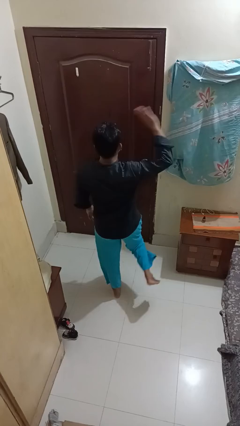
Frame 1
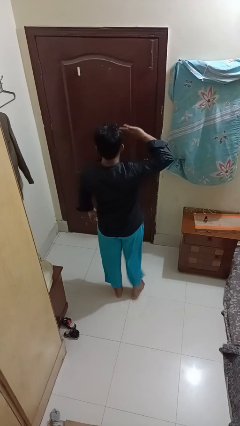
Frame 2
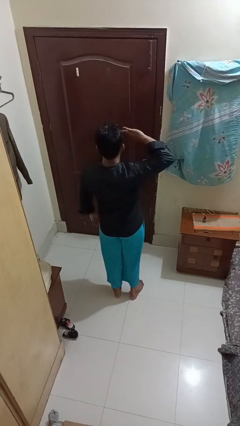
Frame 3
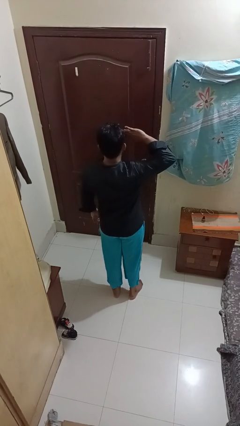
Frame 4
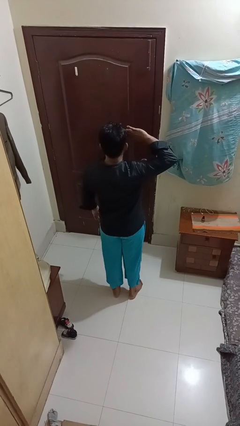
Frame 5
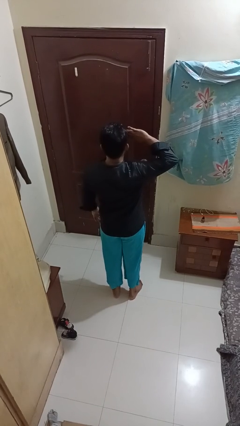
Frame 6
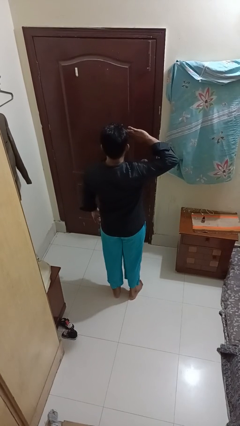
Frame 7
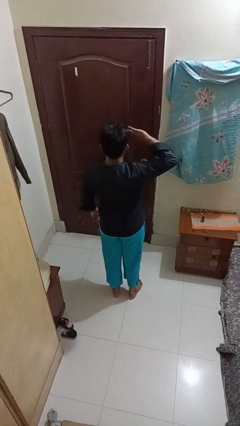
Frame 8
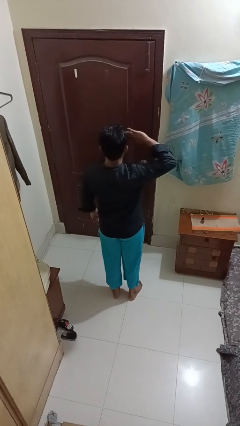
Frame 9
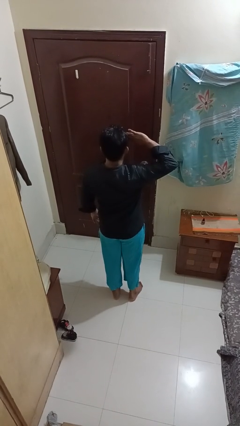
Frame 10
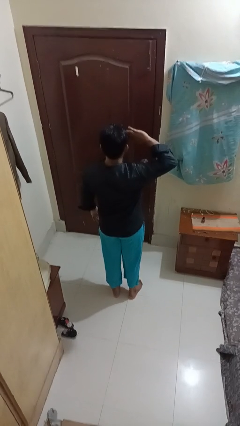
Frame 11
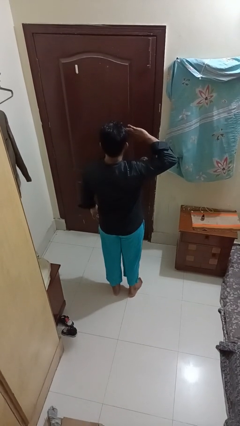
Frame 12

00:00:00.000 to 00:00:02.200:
person salutes

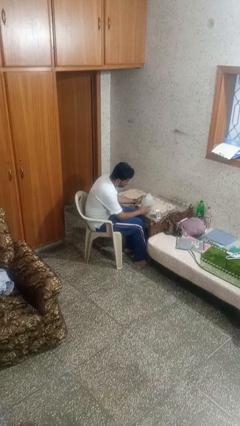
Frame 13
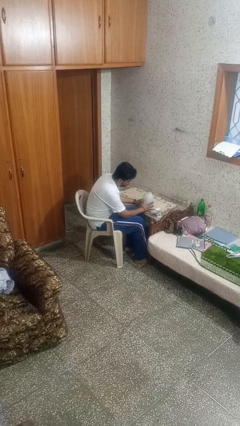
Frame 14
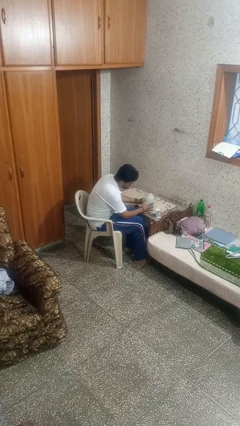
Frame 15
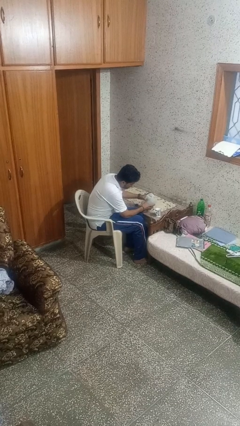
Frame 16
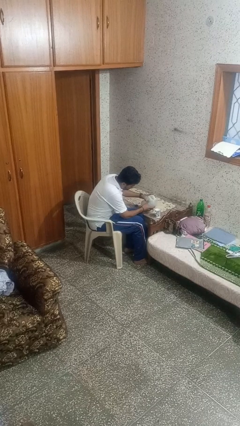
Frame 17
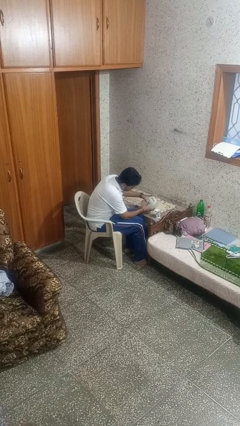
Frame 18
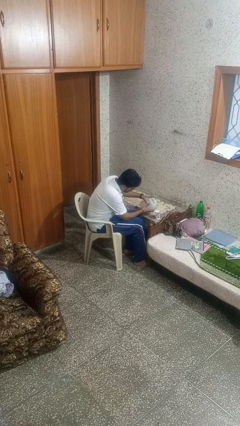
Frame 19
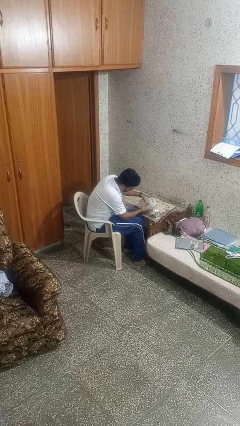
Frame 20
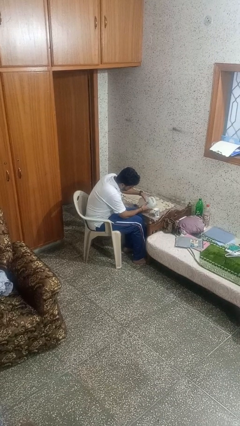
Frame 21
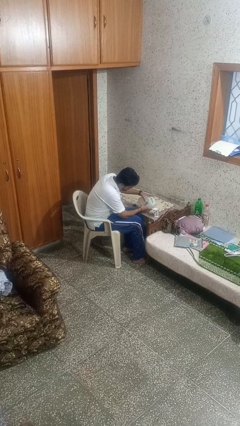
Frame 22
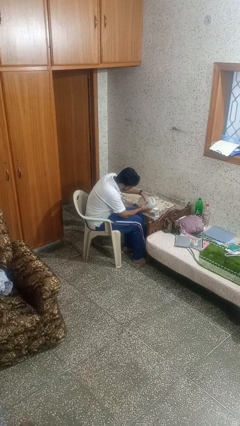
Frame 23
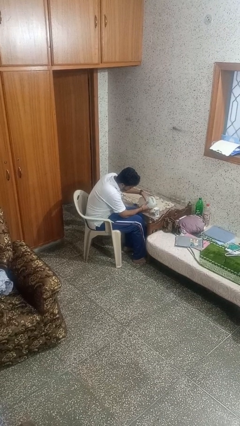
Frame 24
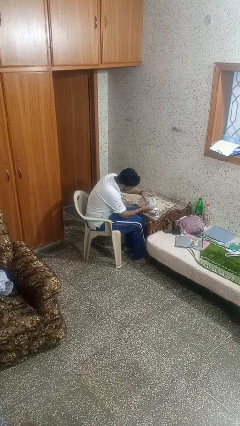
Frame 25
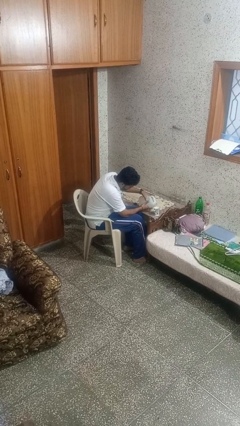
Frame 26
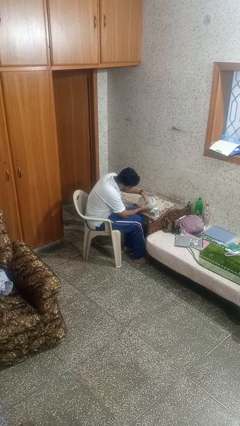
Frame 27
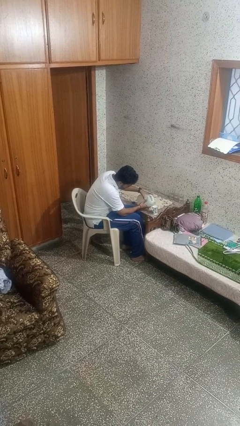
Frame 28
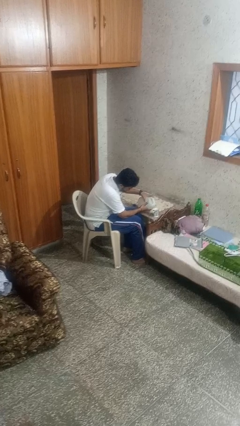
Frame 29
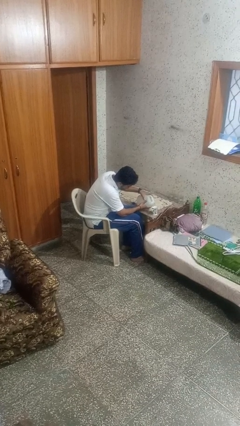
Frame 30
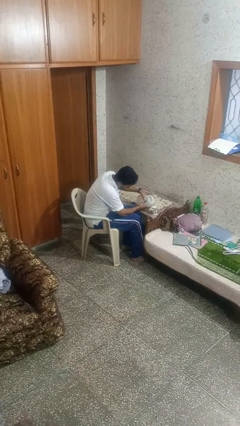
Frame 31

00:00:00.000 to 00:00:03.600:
person pours liquid into cup

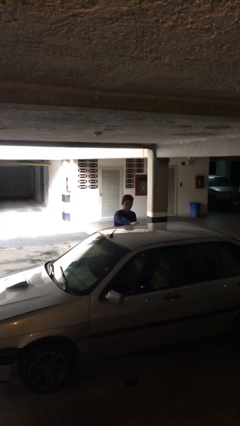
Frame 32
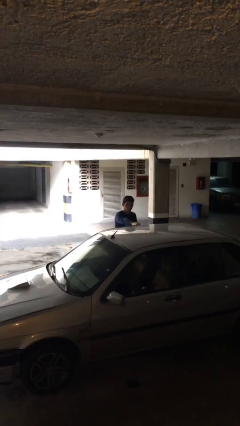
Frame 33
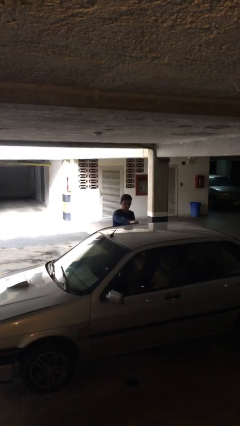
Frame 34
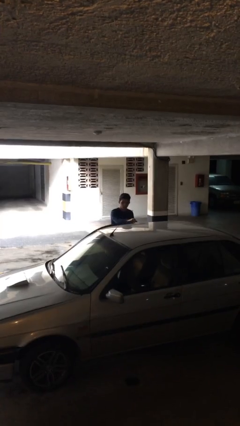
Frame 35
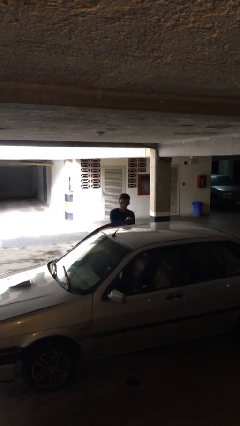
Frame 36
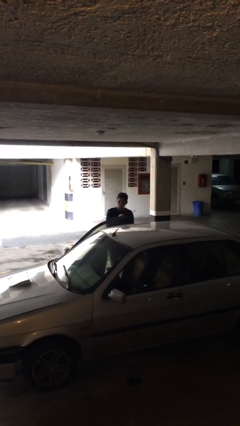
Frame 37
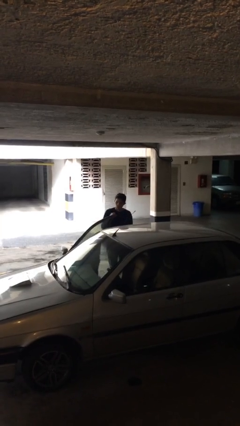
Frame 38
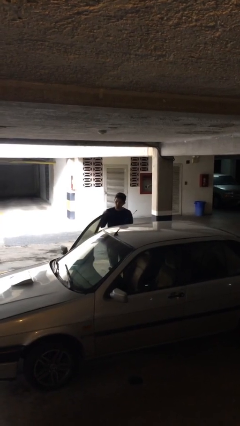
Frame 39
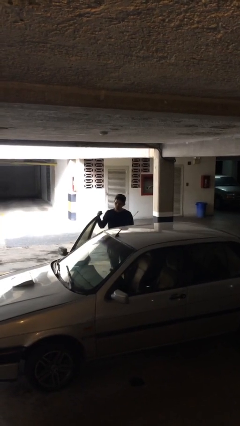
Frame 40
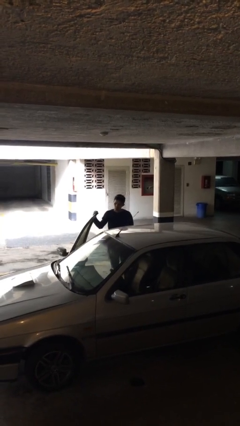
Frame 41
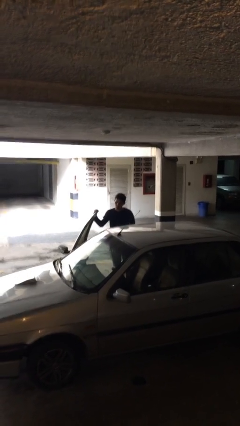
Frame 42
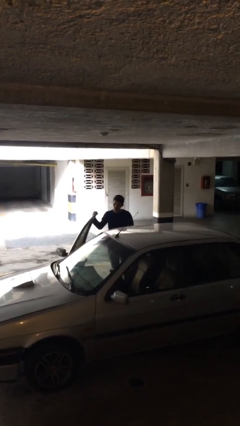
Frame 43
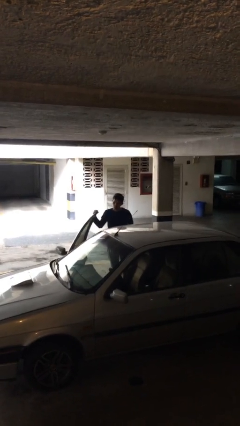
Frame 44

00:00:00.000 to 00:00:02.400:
person opens car door

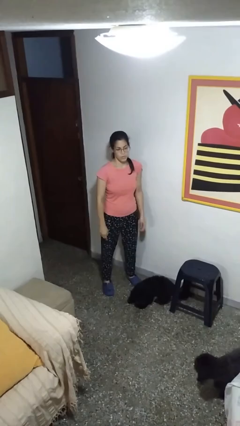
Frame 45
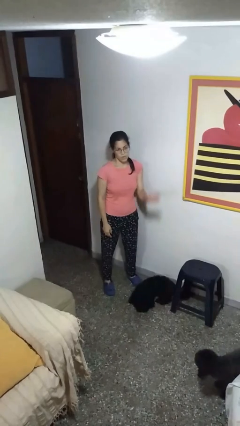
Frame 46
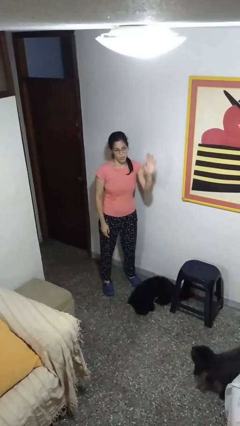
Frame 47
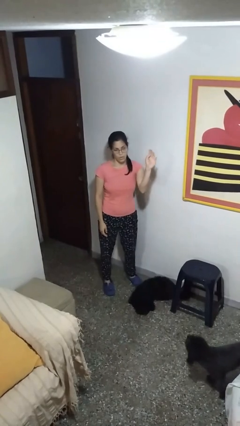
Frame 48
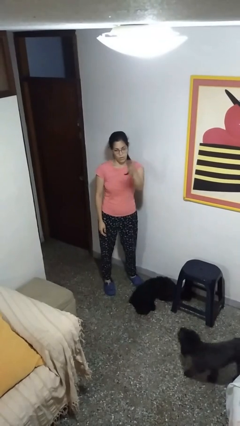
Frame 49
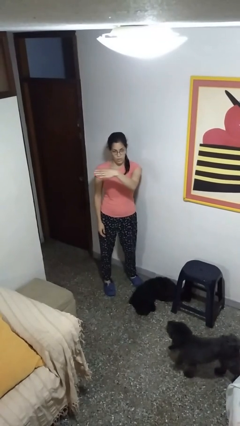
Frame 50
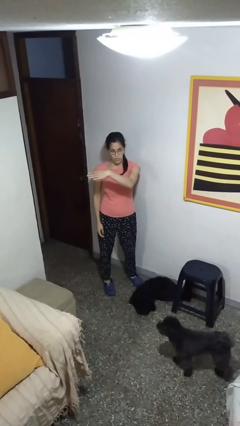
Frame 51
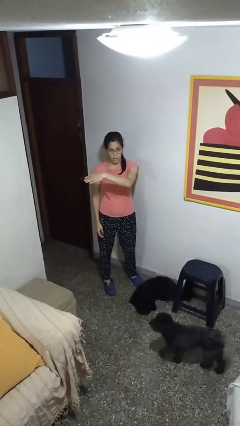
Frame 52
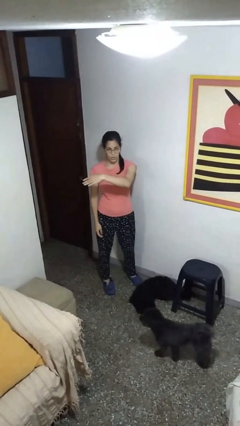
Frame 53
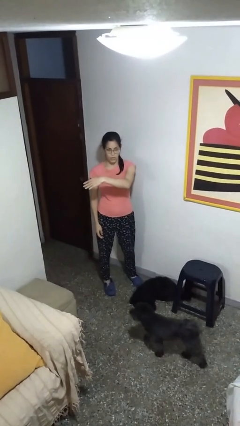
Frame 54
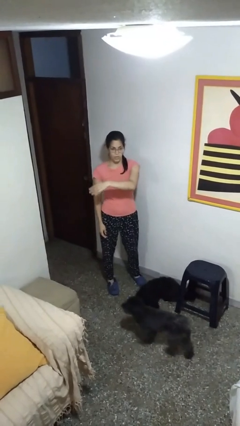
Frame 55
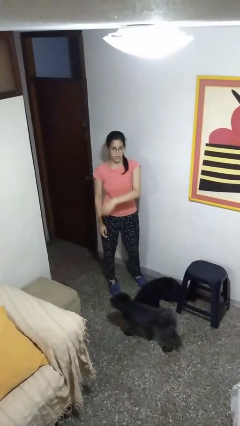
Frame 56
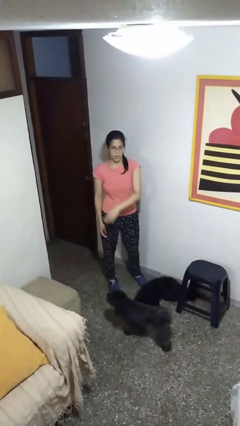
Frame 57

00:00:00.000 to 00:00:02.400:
person gestures swipe right

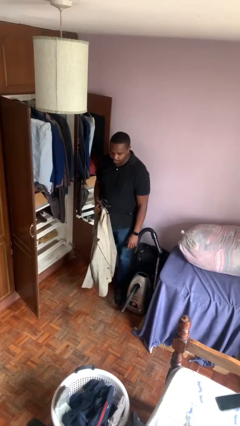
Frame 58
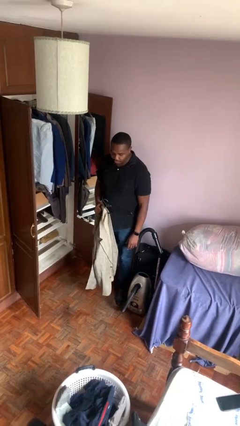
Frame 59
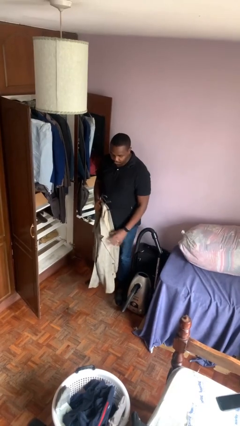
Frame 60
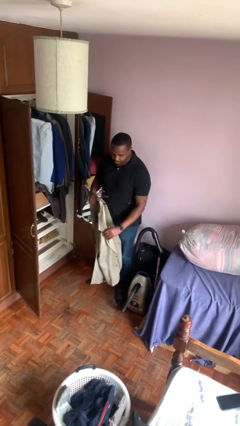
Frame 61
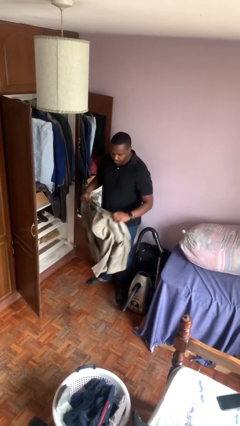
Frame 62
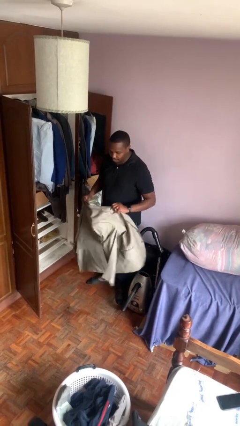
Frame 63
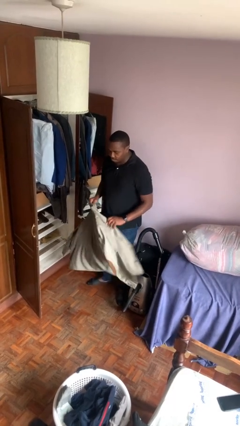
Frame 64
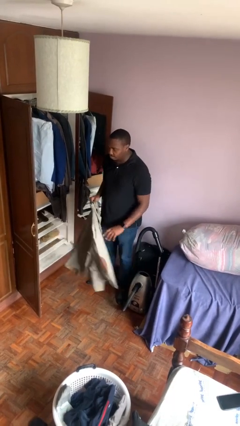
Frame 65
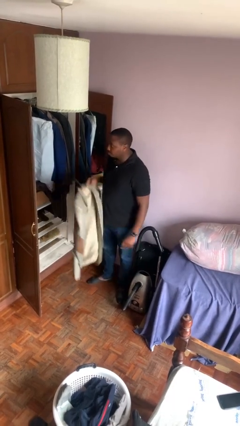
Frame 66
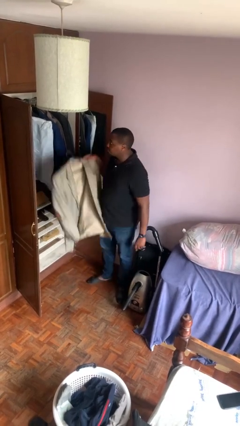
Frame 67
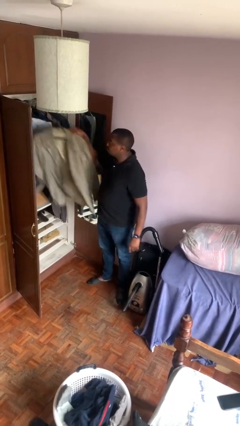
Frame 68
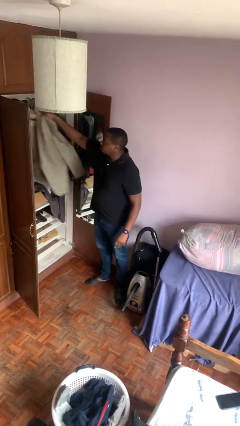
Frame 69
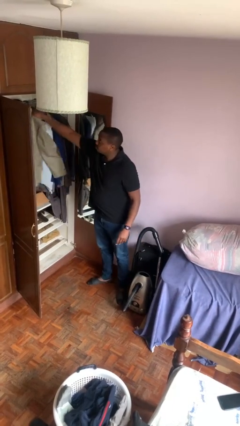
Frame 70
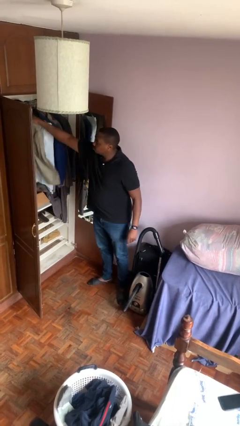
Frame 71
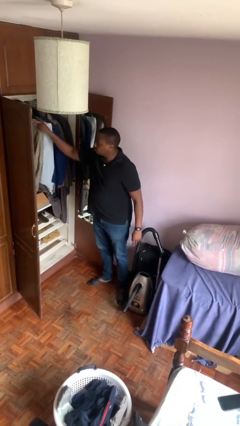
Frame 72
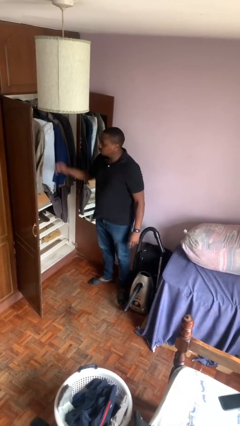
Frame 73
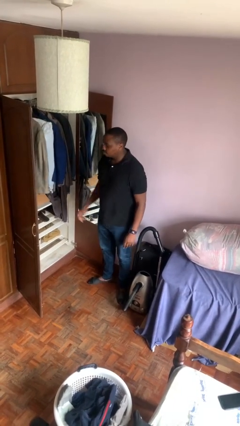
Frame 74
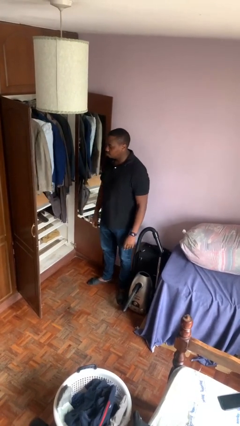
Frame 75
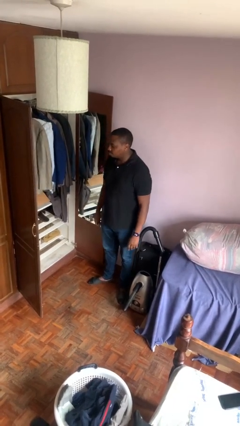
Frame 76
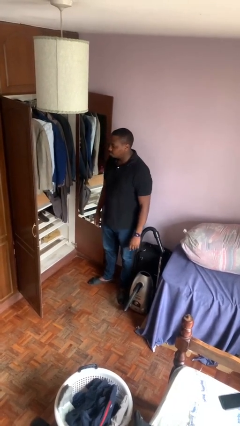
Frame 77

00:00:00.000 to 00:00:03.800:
person puts clothes into closet

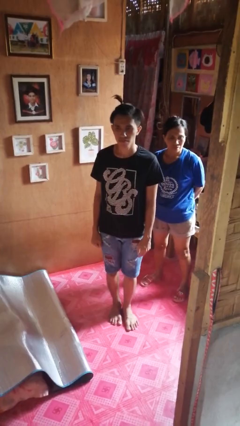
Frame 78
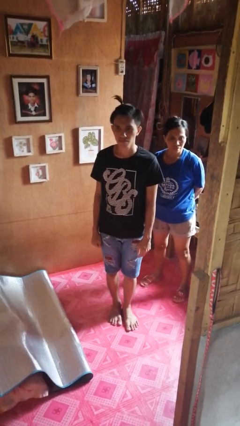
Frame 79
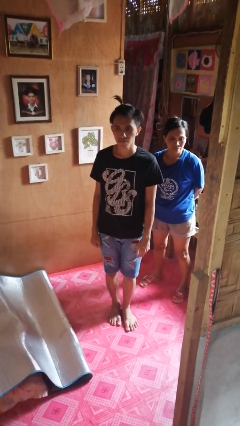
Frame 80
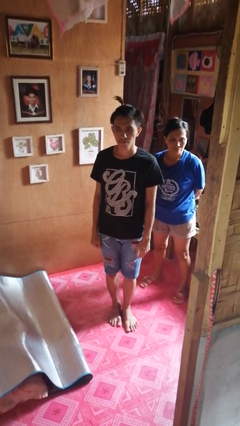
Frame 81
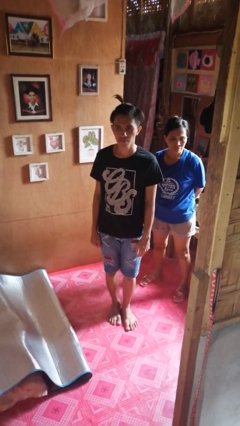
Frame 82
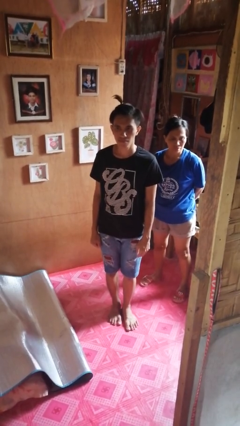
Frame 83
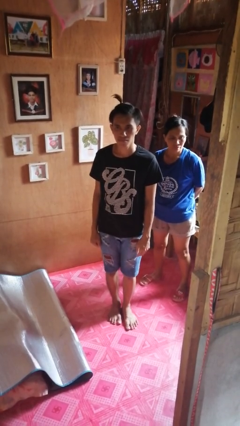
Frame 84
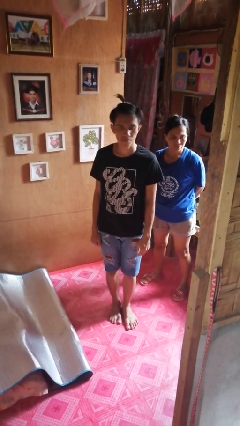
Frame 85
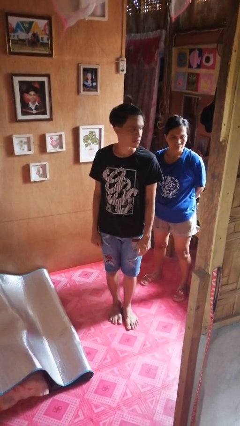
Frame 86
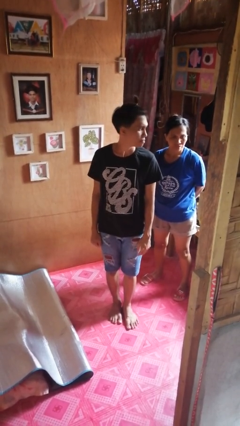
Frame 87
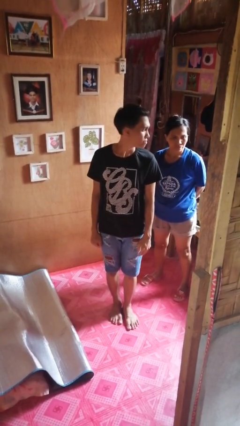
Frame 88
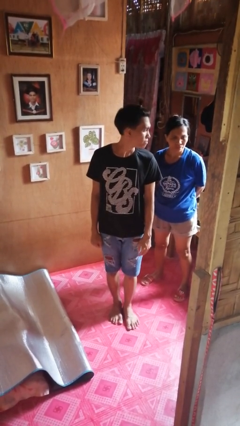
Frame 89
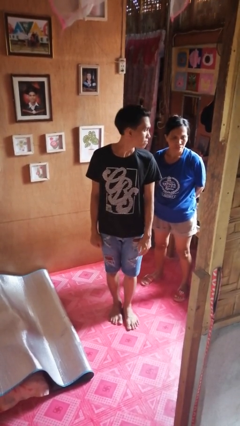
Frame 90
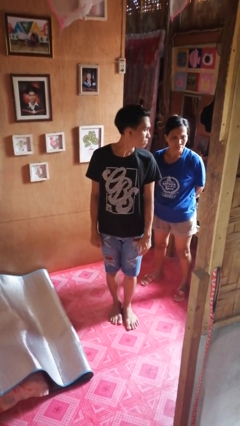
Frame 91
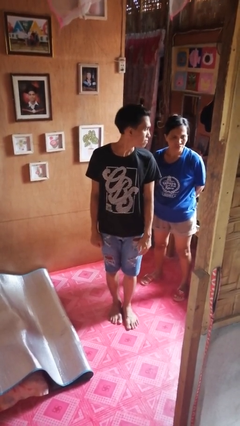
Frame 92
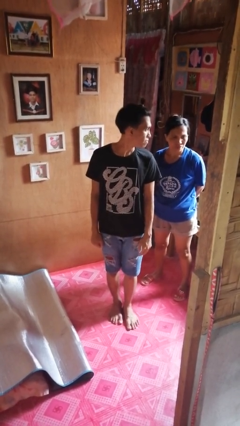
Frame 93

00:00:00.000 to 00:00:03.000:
person looks over shoulder
